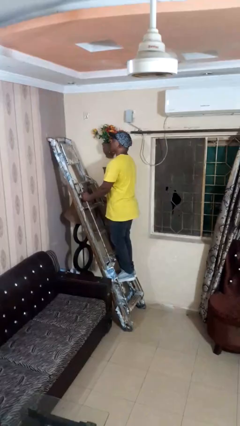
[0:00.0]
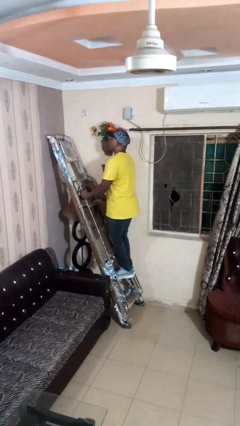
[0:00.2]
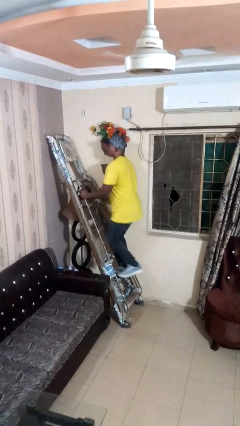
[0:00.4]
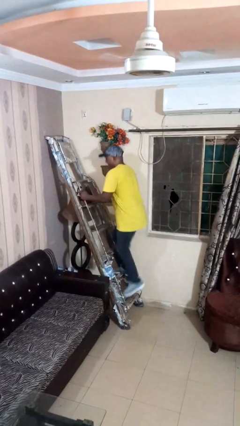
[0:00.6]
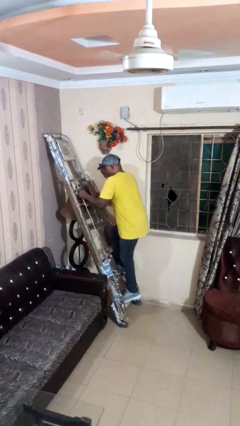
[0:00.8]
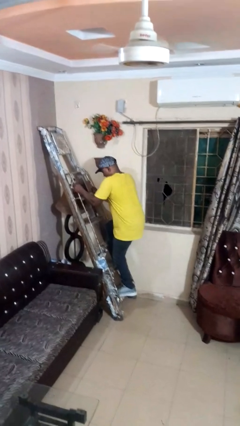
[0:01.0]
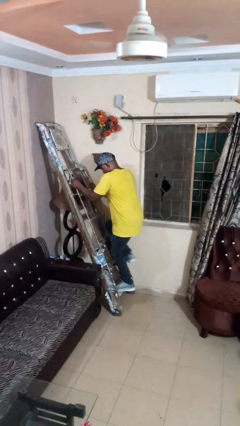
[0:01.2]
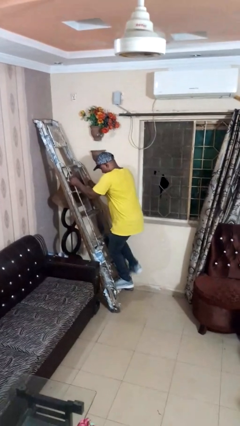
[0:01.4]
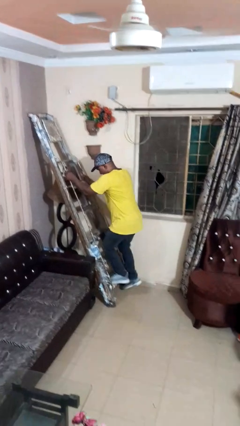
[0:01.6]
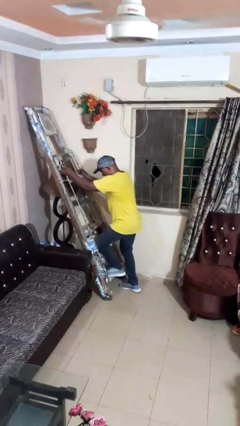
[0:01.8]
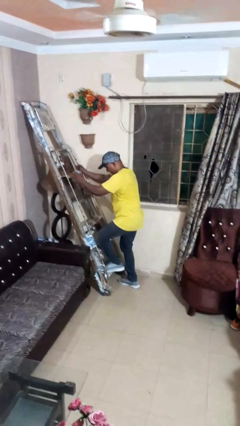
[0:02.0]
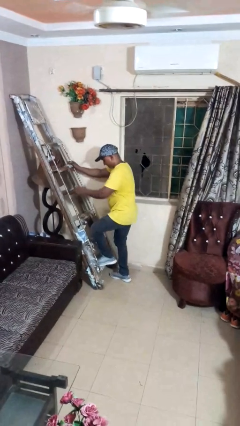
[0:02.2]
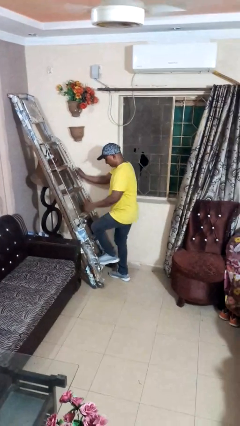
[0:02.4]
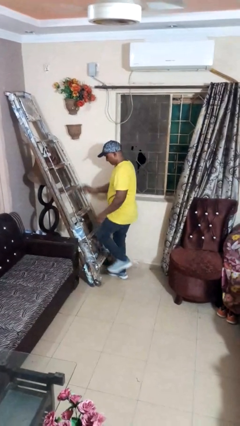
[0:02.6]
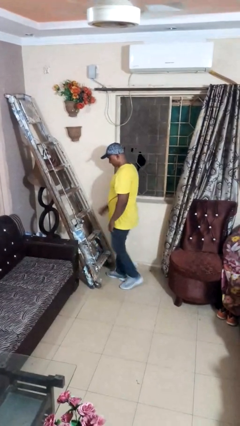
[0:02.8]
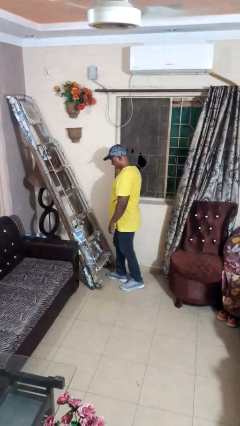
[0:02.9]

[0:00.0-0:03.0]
person climbs down ladder

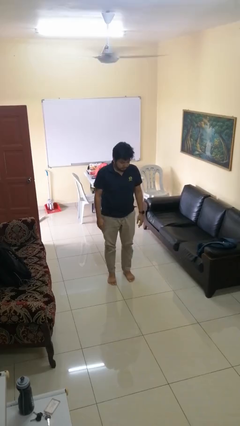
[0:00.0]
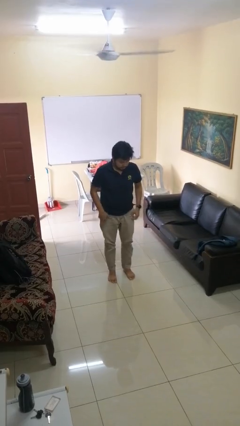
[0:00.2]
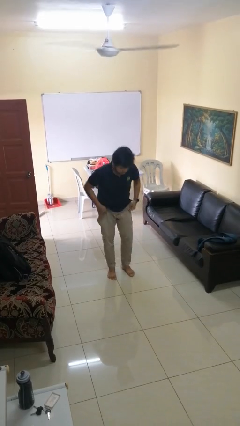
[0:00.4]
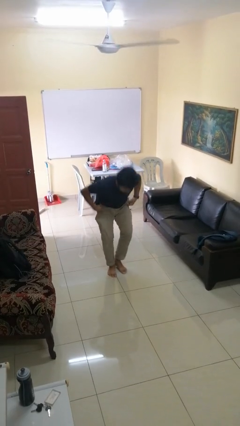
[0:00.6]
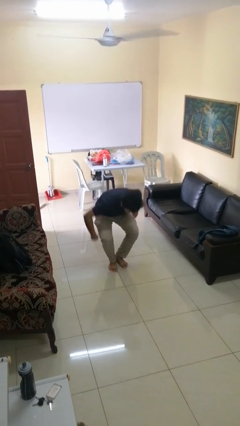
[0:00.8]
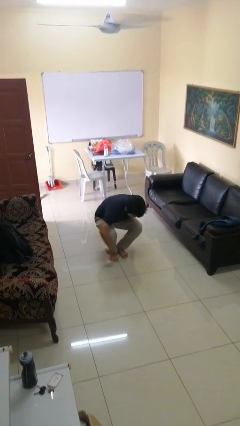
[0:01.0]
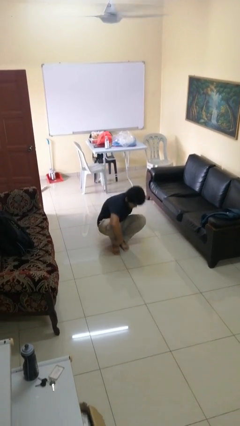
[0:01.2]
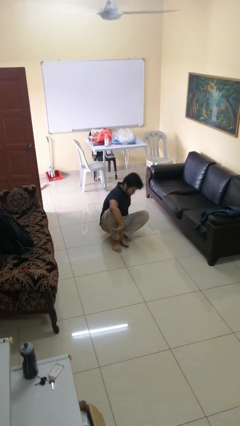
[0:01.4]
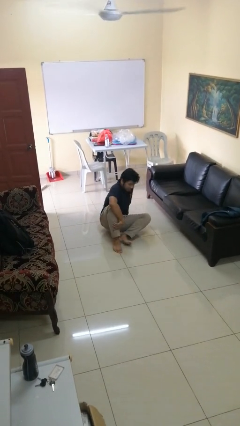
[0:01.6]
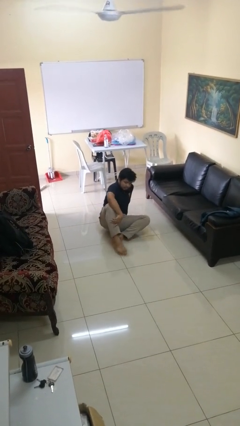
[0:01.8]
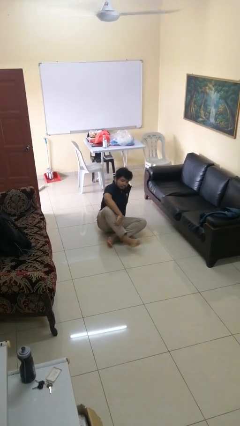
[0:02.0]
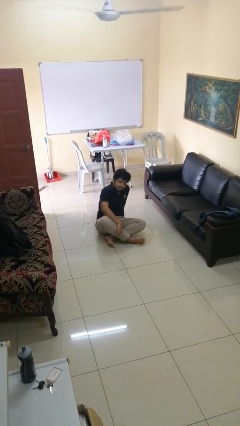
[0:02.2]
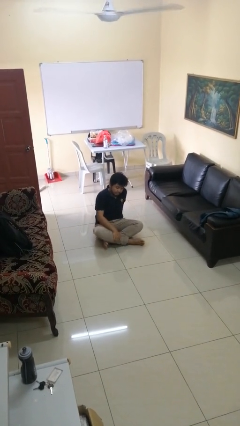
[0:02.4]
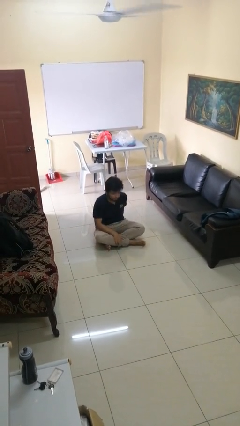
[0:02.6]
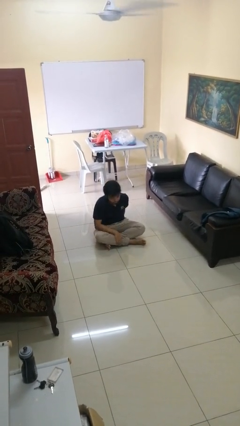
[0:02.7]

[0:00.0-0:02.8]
person sits crisscross

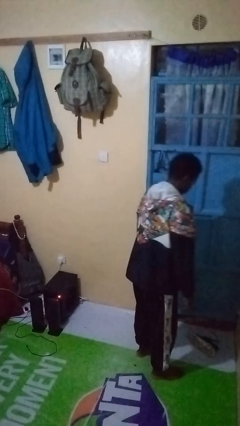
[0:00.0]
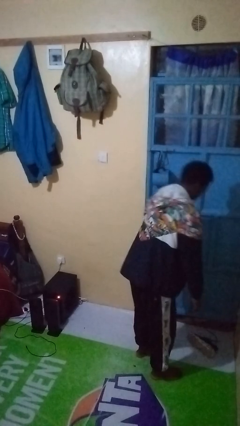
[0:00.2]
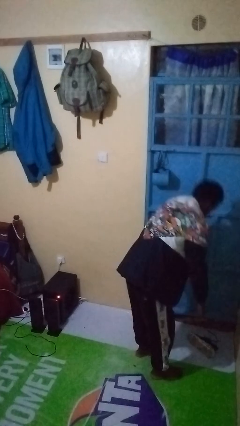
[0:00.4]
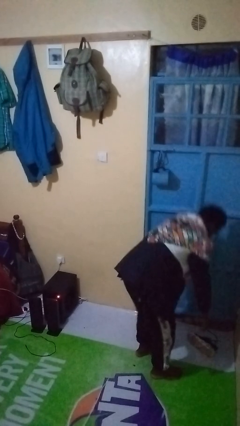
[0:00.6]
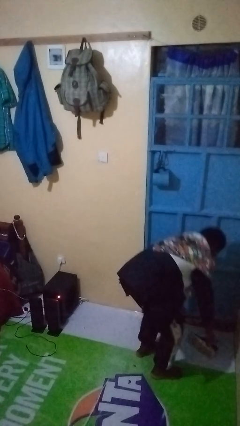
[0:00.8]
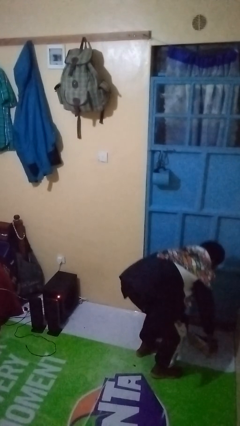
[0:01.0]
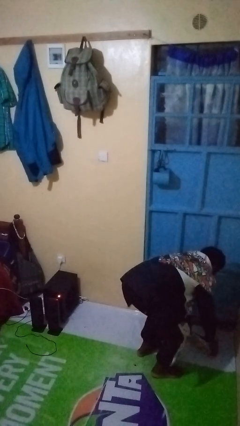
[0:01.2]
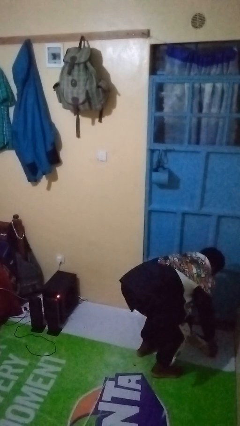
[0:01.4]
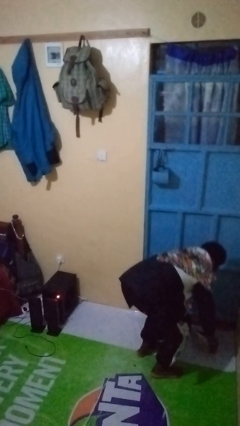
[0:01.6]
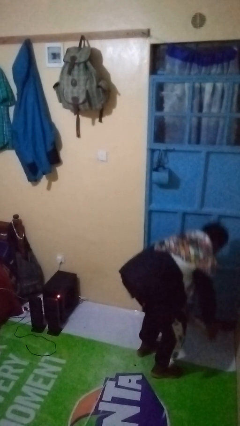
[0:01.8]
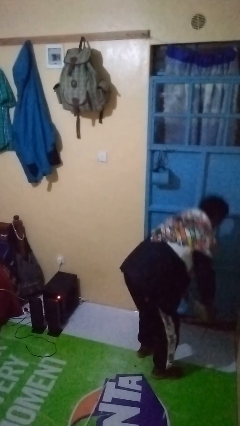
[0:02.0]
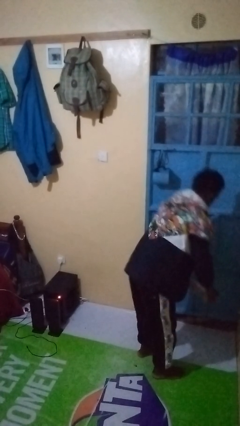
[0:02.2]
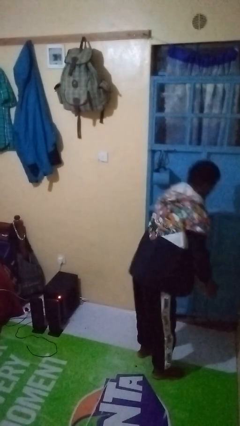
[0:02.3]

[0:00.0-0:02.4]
person picks up object from floor

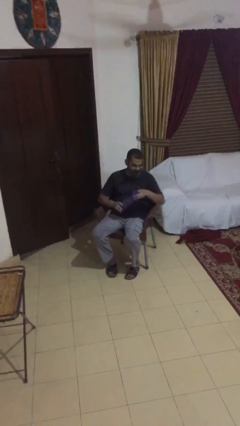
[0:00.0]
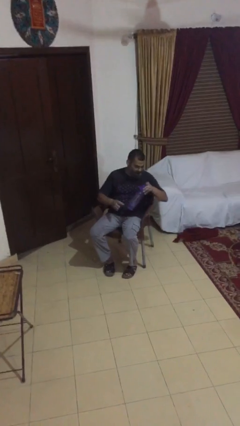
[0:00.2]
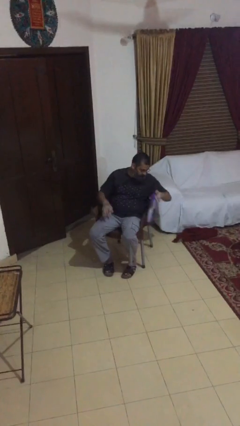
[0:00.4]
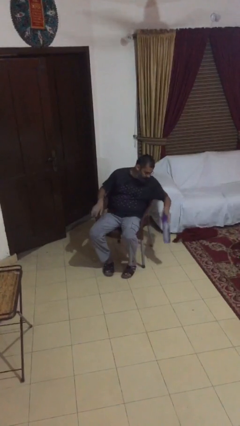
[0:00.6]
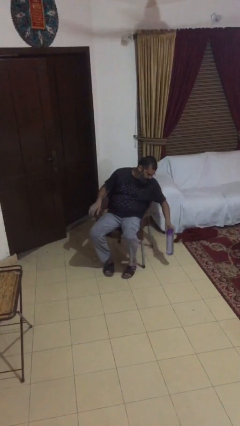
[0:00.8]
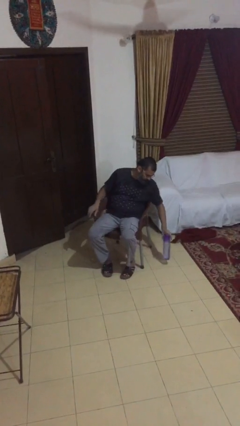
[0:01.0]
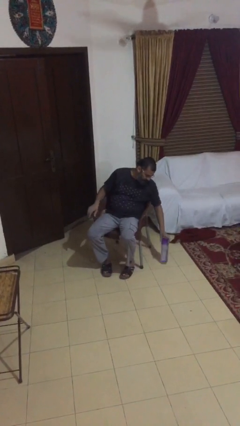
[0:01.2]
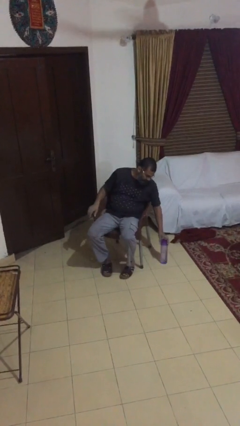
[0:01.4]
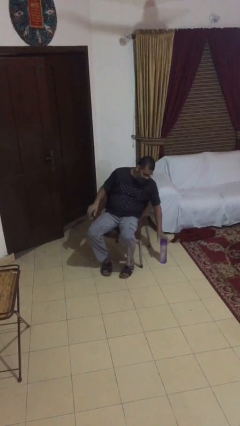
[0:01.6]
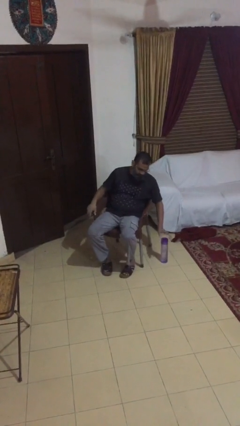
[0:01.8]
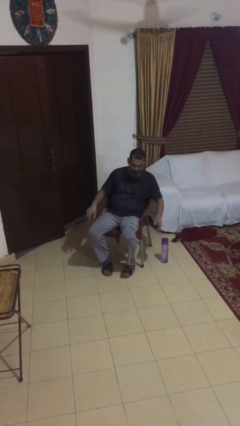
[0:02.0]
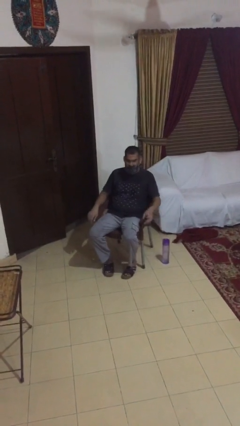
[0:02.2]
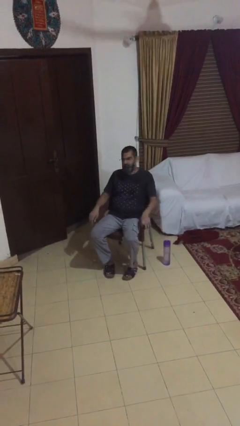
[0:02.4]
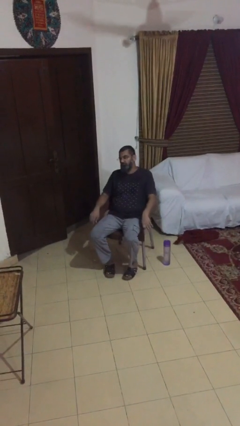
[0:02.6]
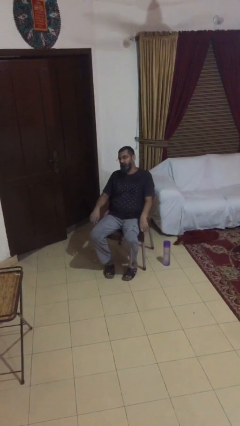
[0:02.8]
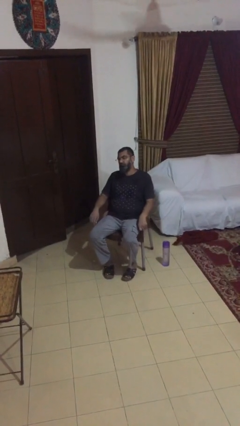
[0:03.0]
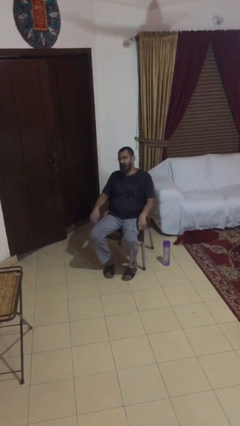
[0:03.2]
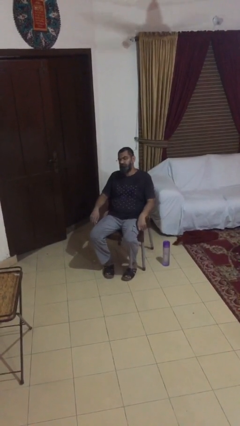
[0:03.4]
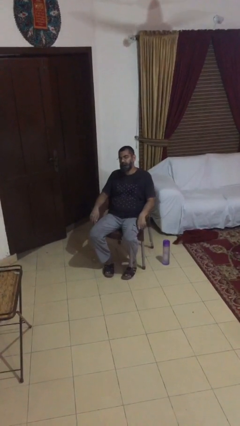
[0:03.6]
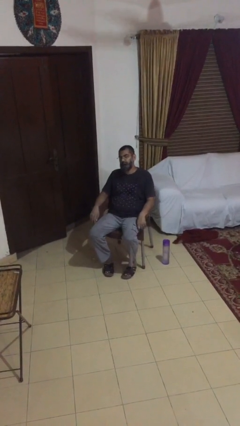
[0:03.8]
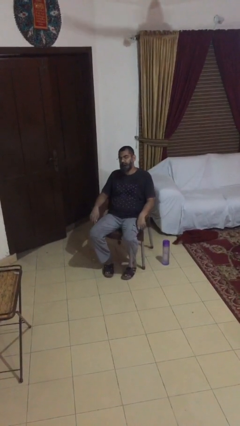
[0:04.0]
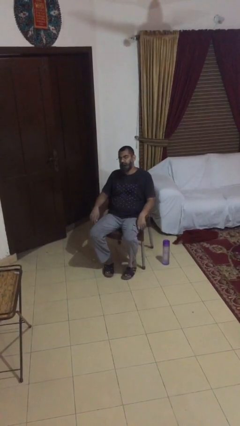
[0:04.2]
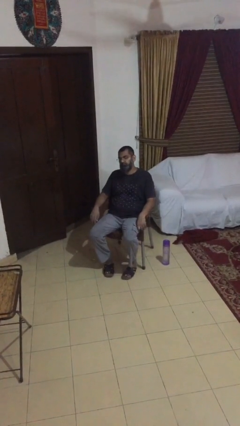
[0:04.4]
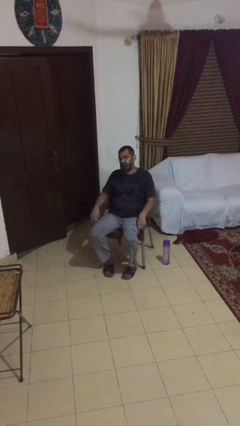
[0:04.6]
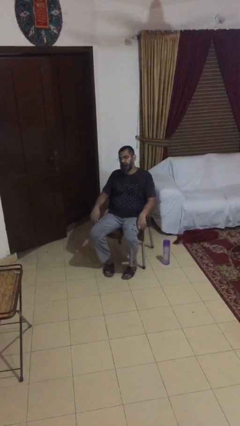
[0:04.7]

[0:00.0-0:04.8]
person puts down object on floor

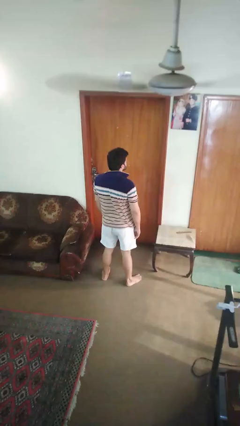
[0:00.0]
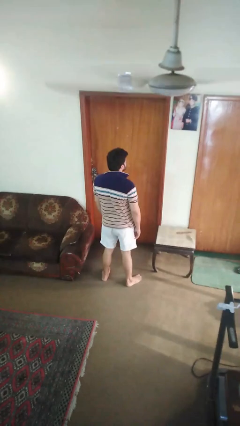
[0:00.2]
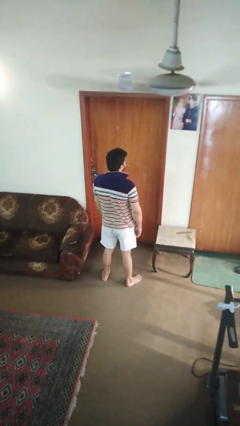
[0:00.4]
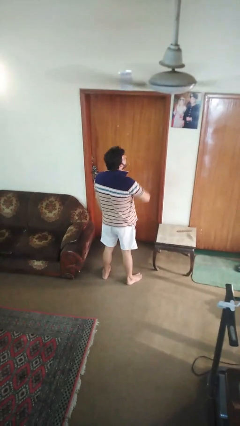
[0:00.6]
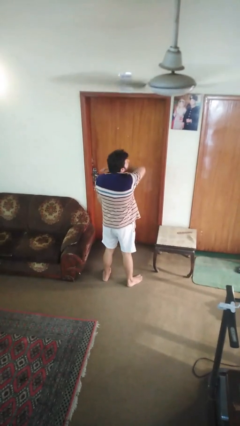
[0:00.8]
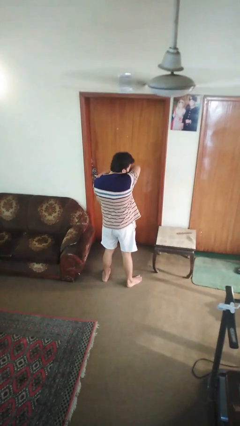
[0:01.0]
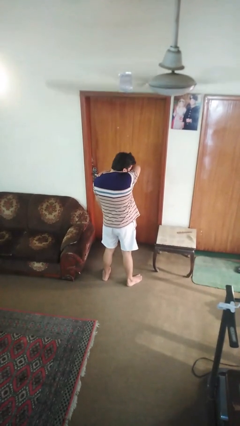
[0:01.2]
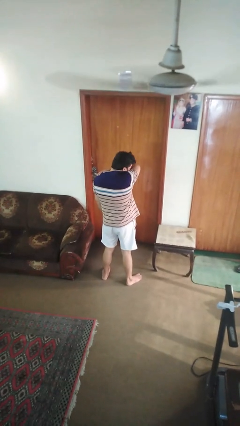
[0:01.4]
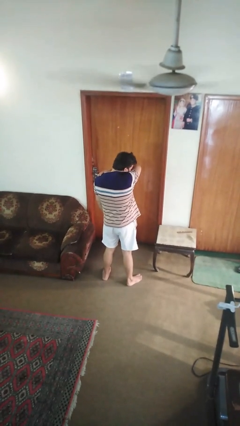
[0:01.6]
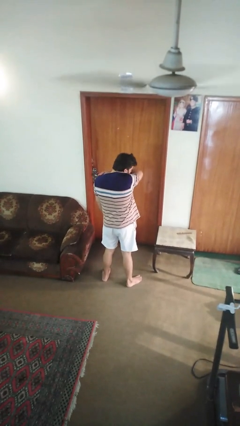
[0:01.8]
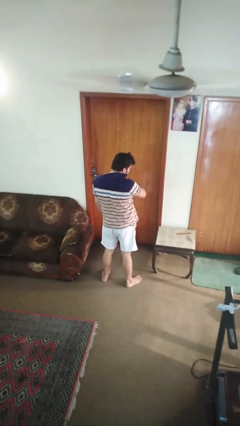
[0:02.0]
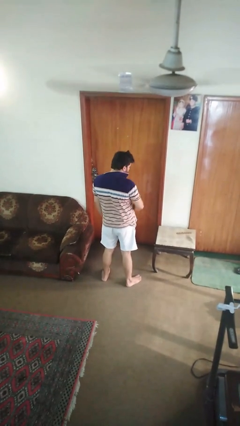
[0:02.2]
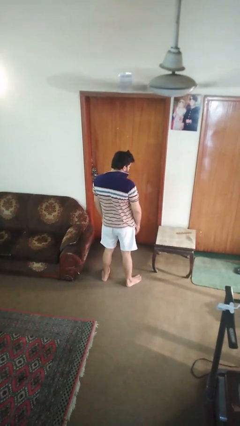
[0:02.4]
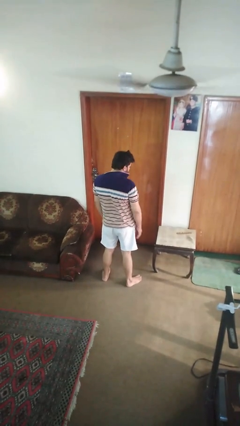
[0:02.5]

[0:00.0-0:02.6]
person sneezes into arm

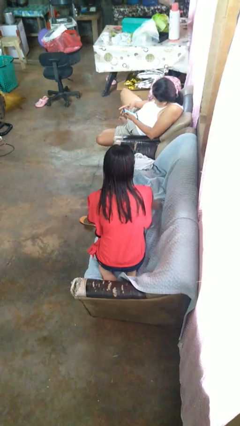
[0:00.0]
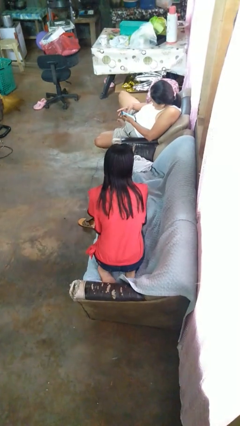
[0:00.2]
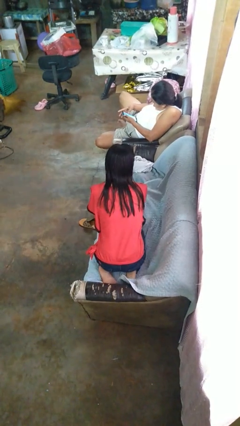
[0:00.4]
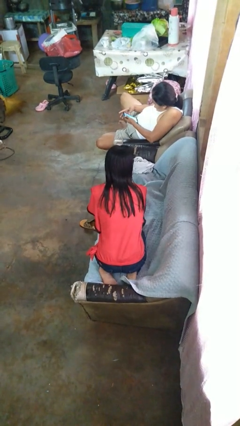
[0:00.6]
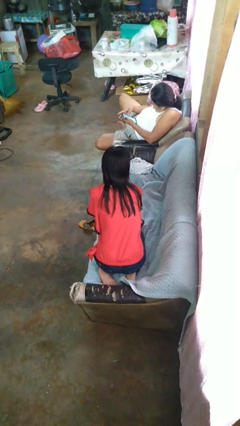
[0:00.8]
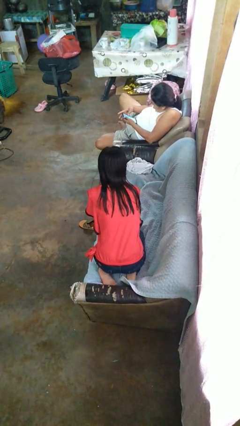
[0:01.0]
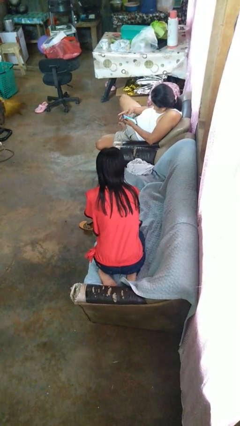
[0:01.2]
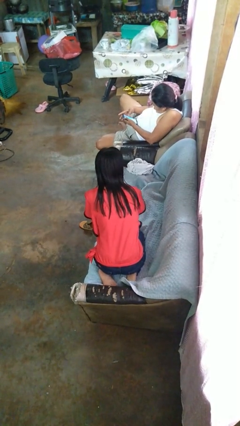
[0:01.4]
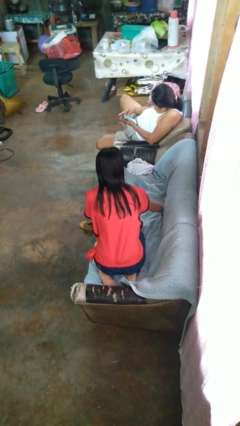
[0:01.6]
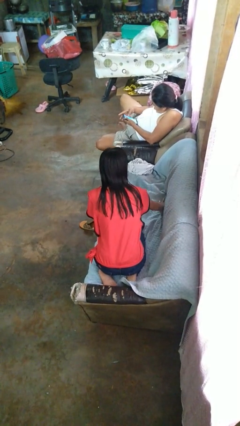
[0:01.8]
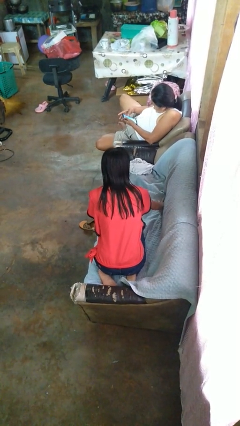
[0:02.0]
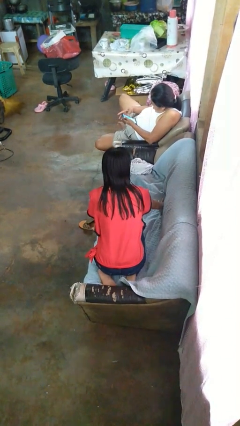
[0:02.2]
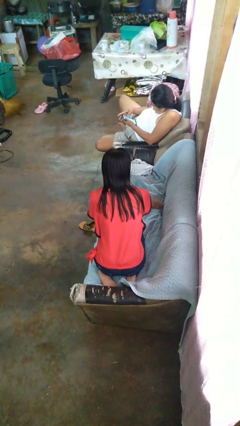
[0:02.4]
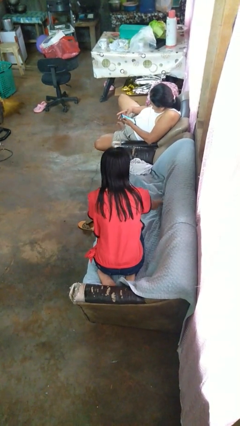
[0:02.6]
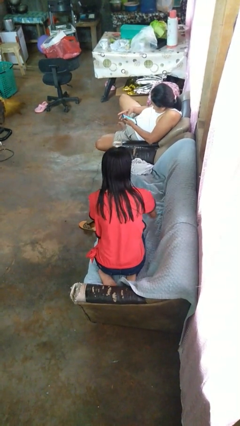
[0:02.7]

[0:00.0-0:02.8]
person searches in couch
